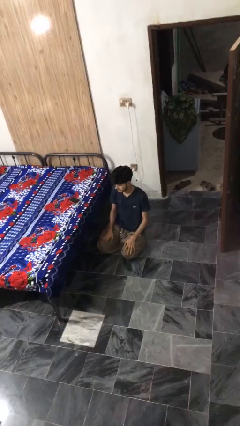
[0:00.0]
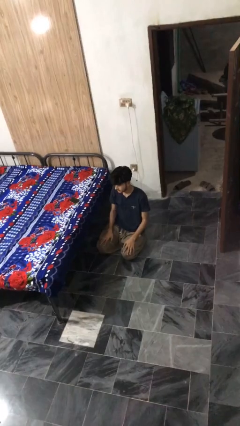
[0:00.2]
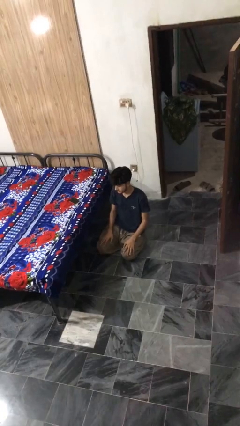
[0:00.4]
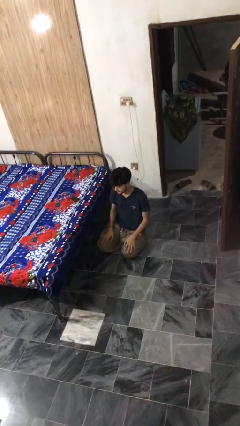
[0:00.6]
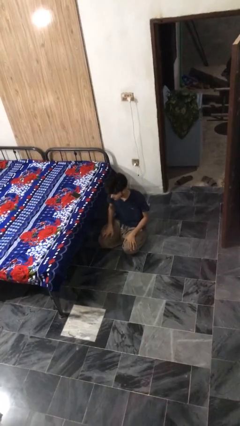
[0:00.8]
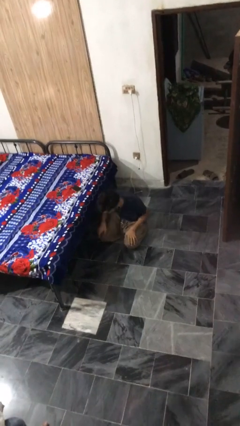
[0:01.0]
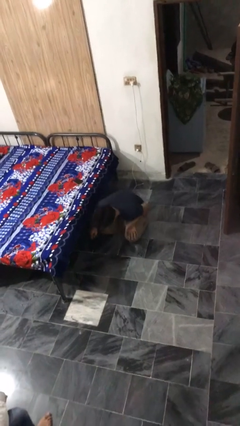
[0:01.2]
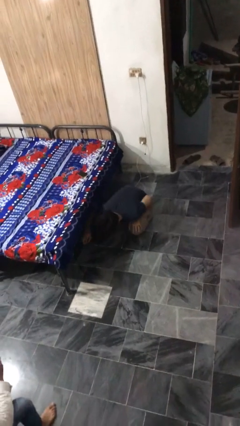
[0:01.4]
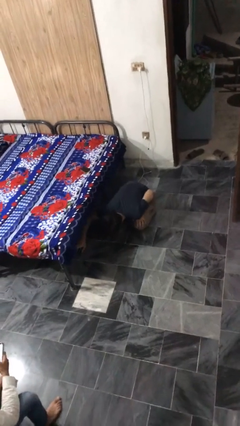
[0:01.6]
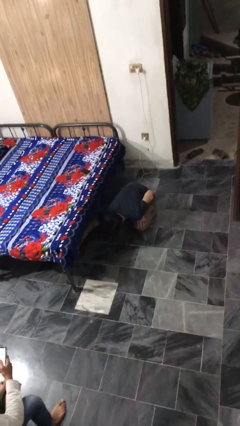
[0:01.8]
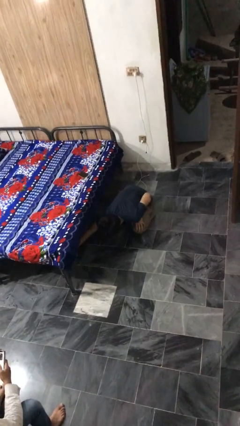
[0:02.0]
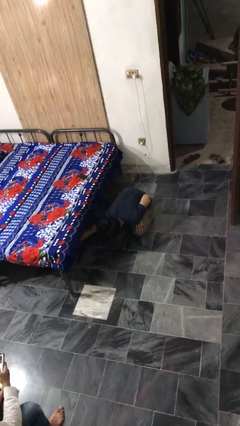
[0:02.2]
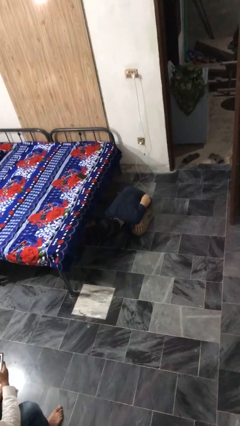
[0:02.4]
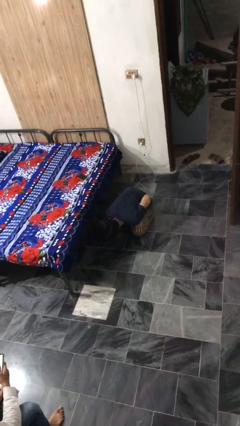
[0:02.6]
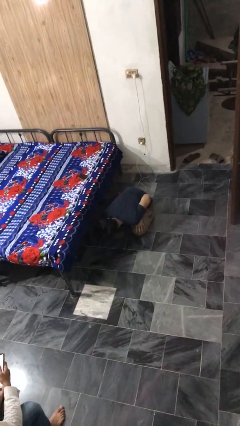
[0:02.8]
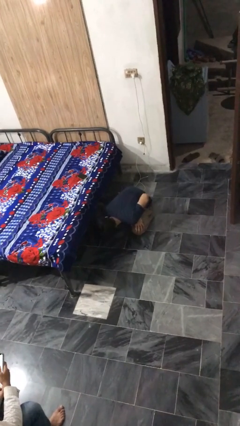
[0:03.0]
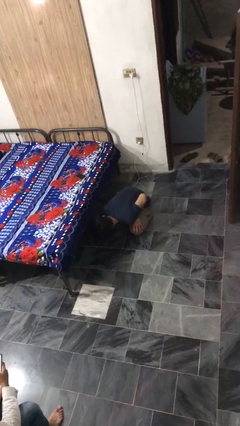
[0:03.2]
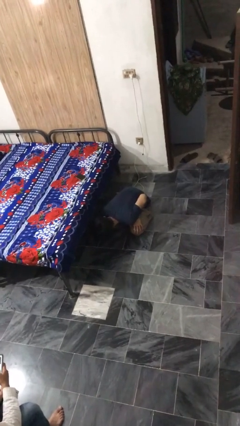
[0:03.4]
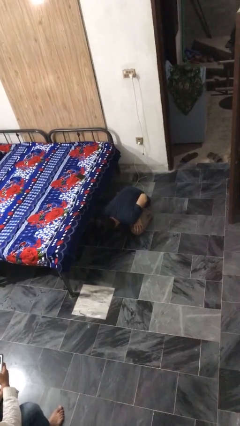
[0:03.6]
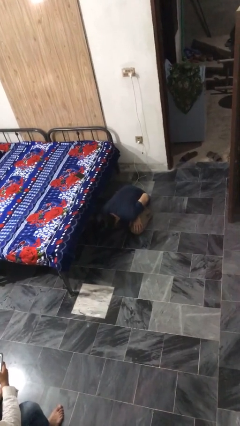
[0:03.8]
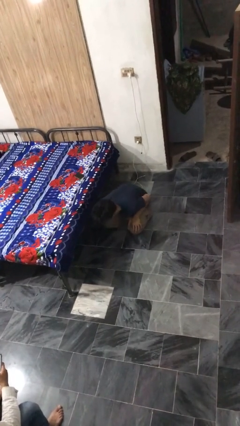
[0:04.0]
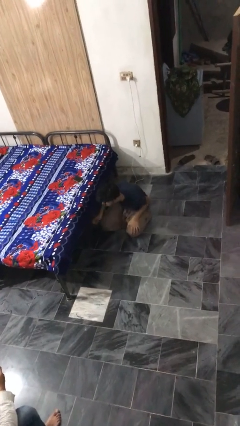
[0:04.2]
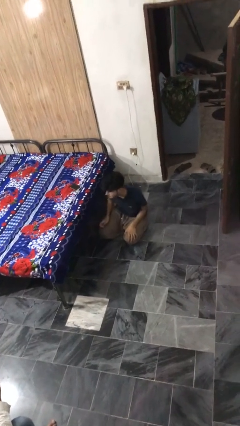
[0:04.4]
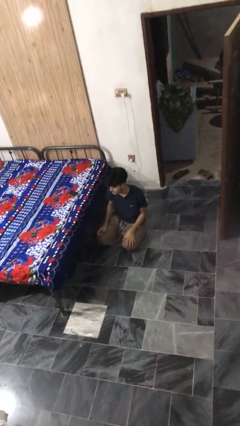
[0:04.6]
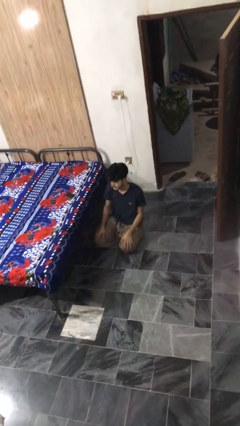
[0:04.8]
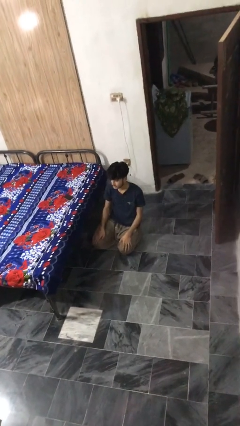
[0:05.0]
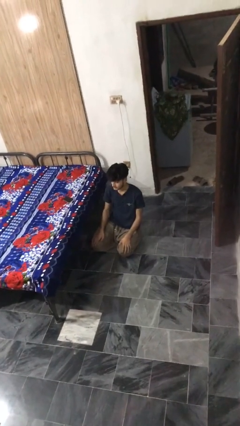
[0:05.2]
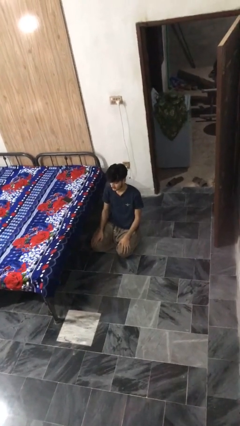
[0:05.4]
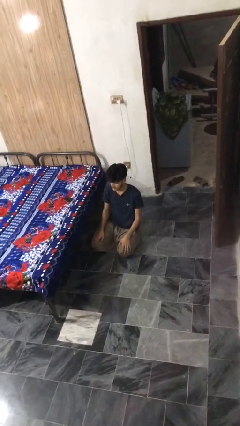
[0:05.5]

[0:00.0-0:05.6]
person searches under bed

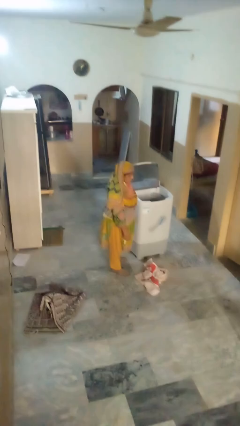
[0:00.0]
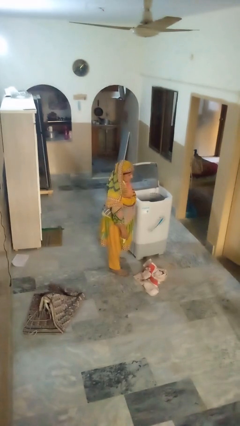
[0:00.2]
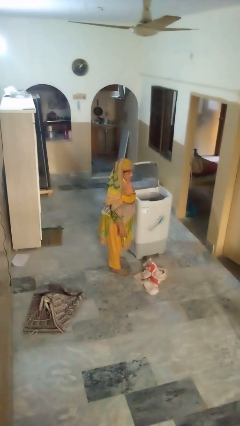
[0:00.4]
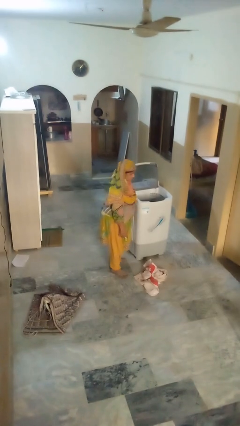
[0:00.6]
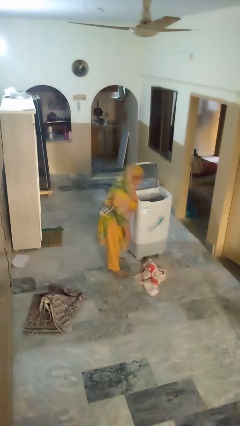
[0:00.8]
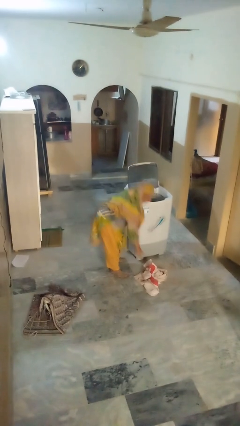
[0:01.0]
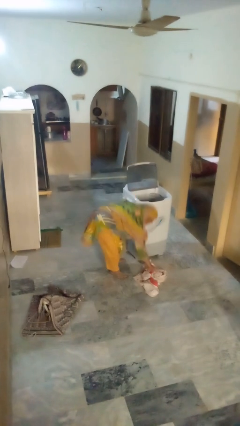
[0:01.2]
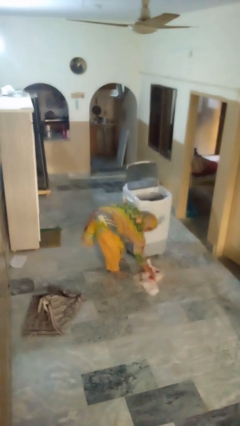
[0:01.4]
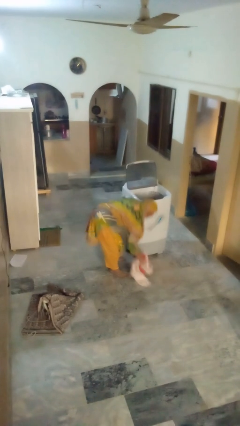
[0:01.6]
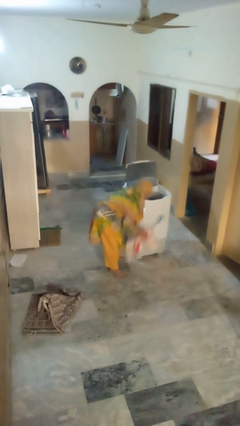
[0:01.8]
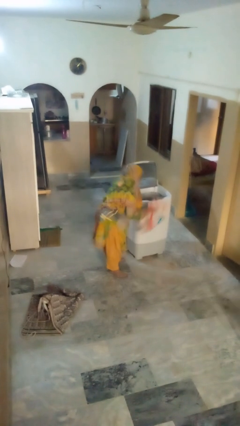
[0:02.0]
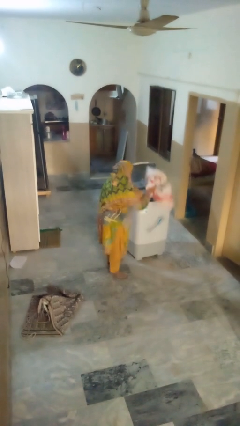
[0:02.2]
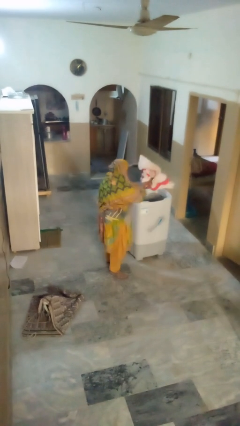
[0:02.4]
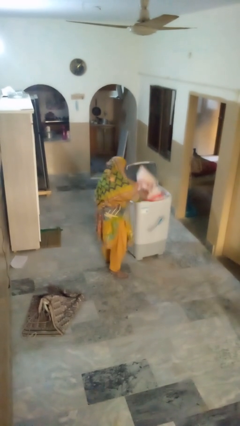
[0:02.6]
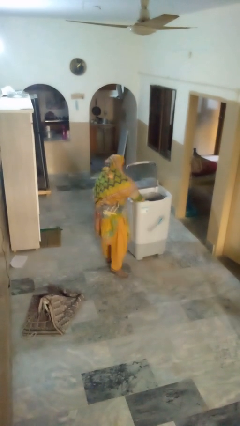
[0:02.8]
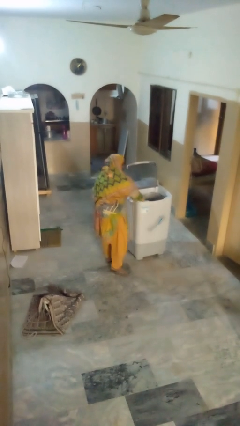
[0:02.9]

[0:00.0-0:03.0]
person loads clotheswasher

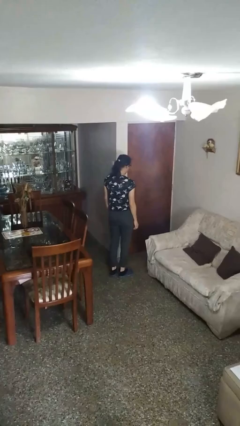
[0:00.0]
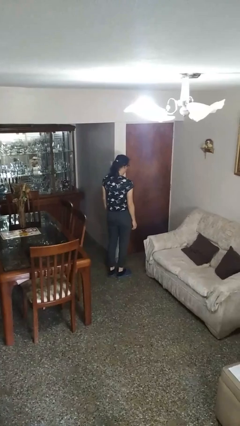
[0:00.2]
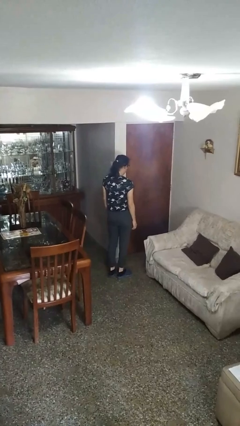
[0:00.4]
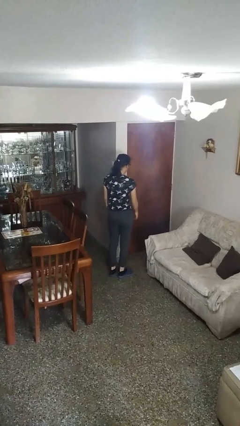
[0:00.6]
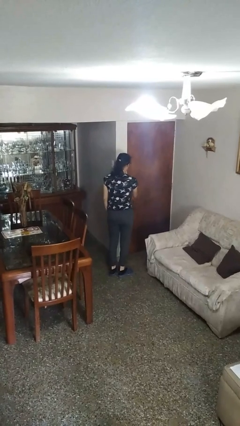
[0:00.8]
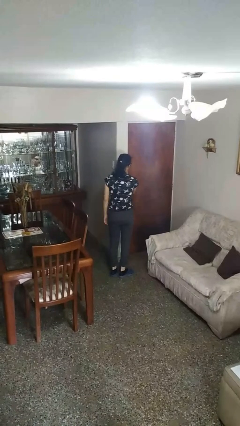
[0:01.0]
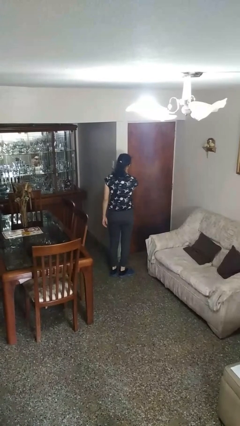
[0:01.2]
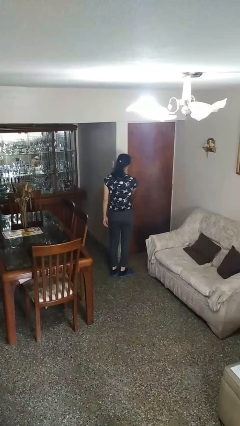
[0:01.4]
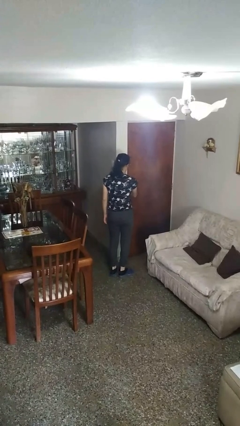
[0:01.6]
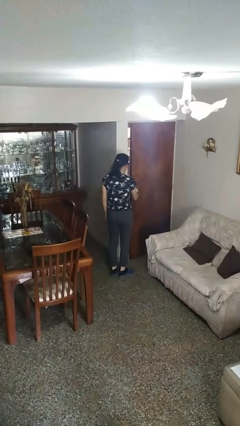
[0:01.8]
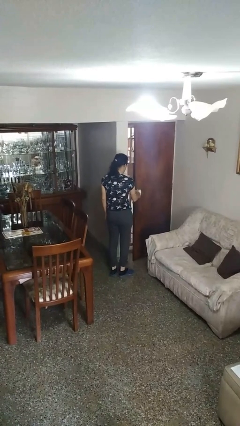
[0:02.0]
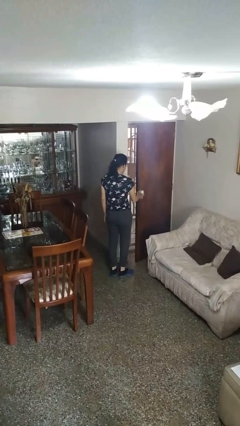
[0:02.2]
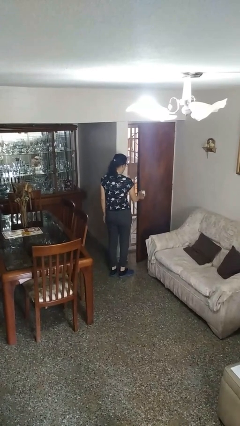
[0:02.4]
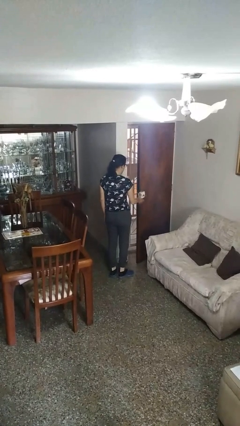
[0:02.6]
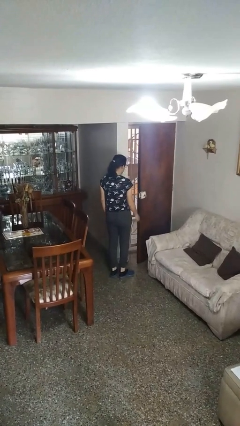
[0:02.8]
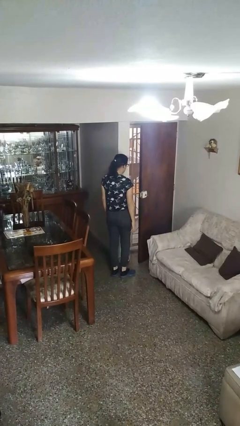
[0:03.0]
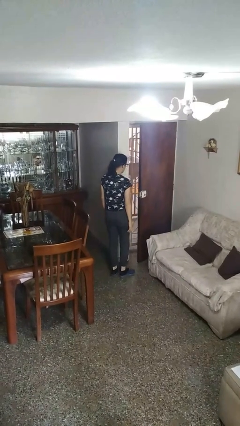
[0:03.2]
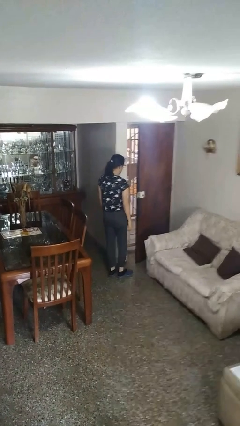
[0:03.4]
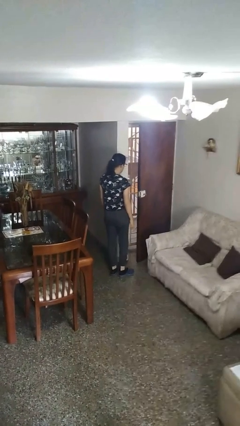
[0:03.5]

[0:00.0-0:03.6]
person opens facility door

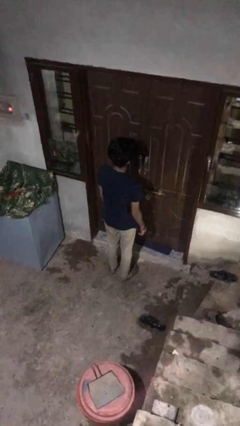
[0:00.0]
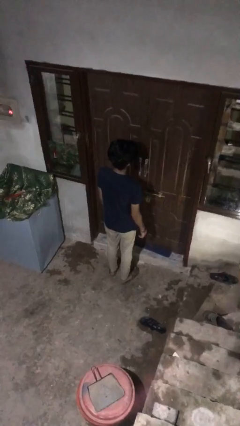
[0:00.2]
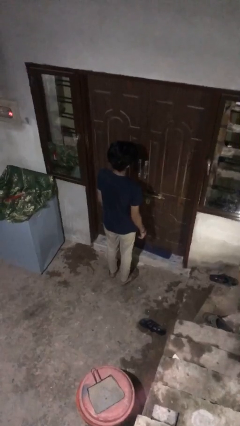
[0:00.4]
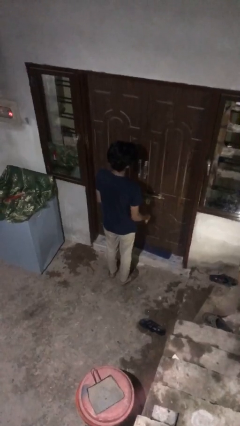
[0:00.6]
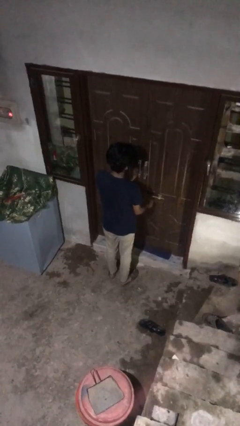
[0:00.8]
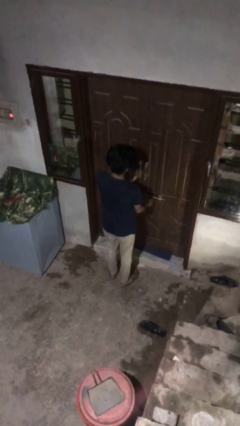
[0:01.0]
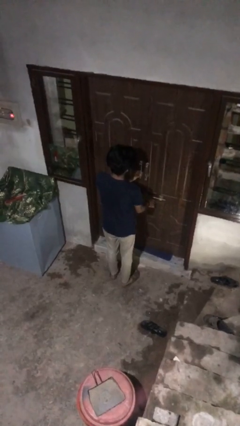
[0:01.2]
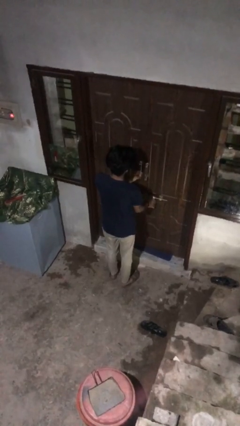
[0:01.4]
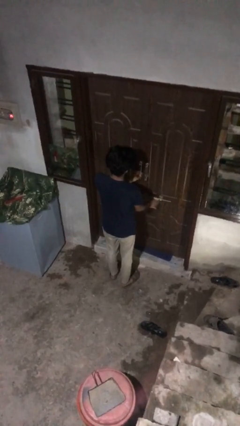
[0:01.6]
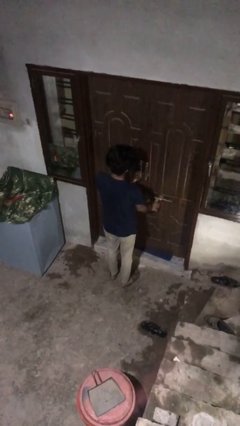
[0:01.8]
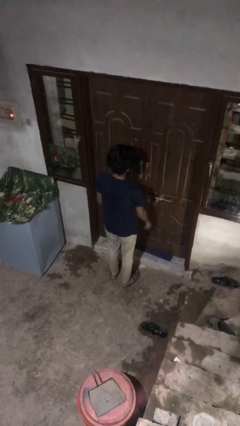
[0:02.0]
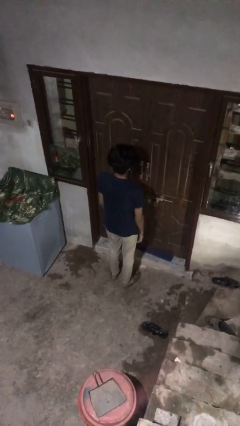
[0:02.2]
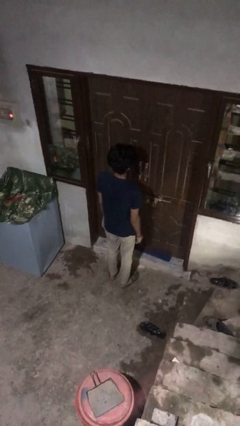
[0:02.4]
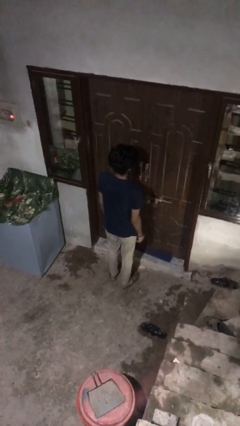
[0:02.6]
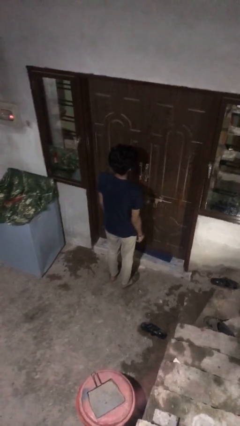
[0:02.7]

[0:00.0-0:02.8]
person unlocks door with keys

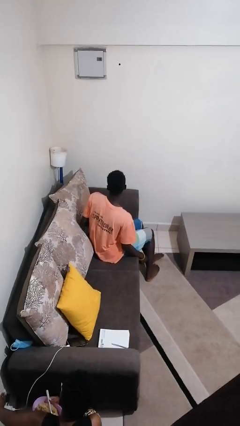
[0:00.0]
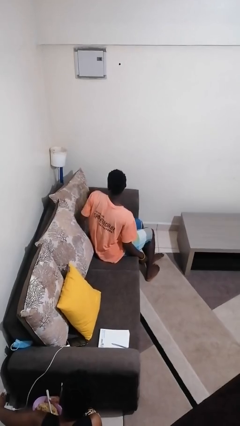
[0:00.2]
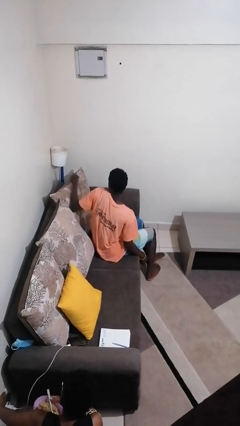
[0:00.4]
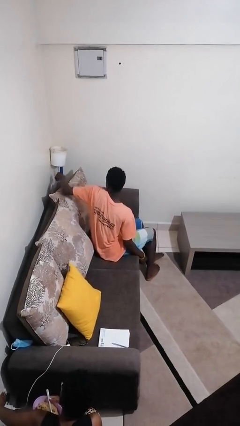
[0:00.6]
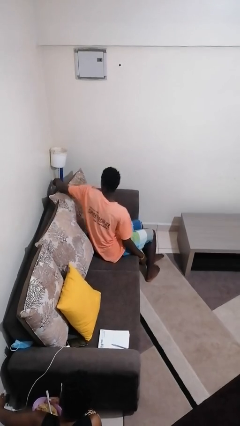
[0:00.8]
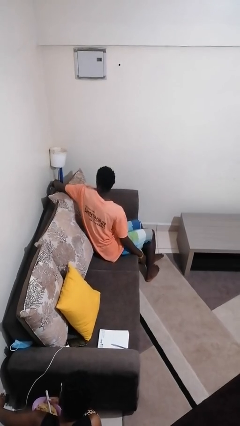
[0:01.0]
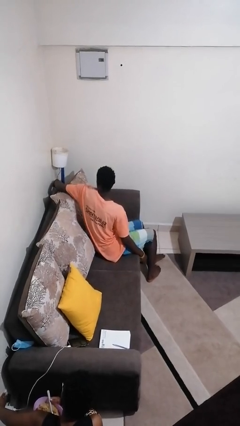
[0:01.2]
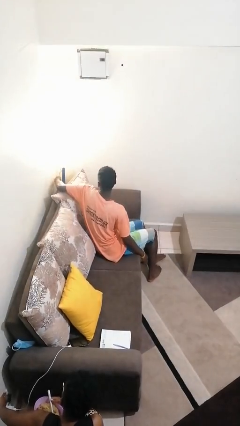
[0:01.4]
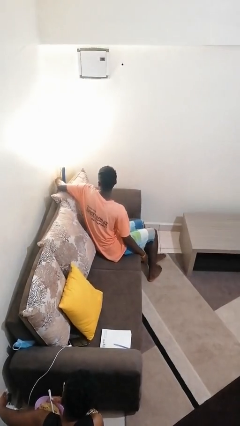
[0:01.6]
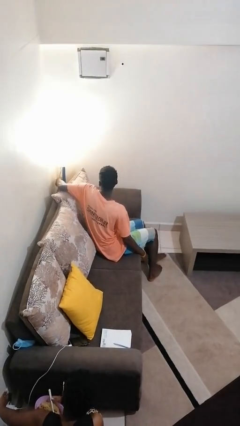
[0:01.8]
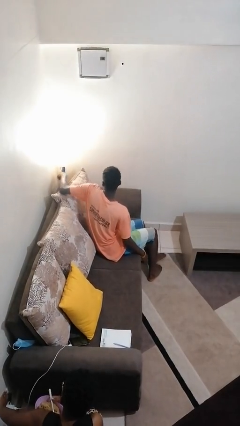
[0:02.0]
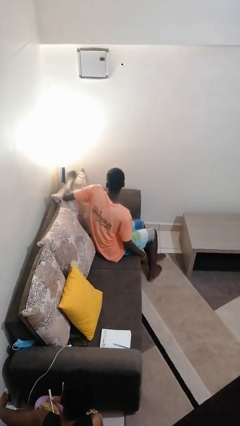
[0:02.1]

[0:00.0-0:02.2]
person turns on lamp

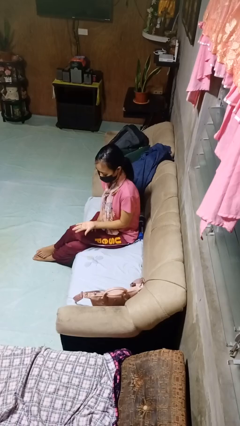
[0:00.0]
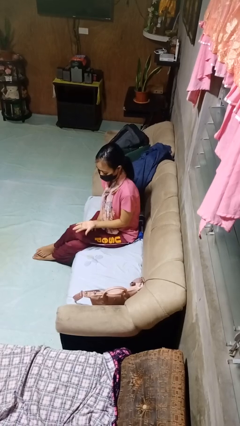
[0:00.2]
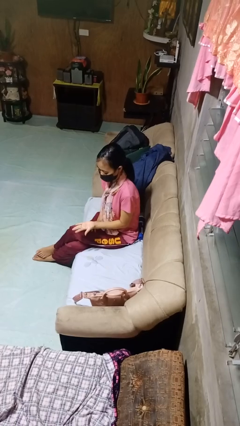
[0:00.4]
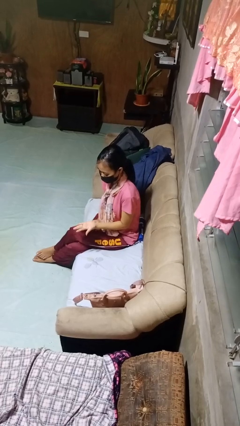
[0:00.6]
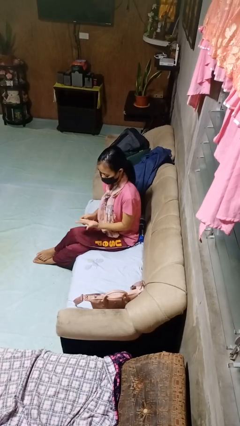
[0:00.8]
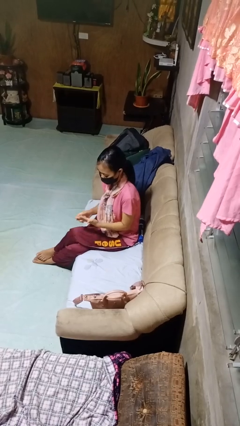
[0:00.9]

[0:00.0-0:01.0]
person takes off ring
